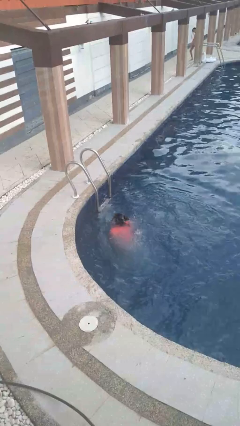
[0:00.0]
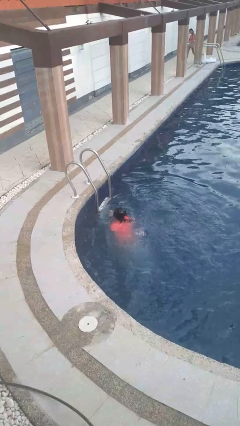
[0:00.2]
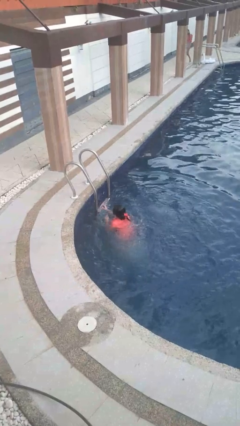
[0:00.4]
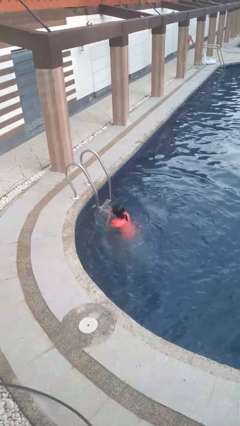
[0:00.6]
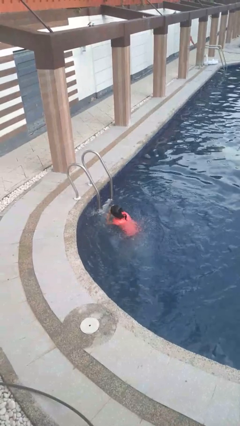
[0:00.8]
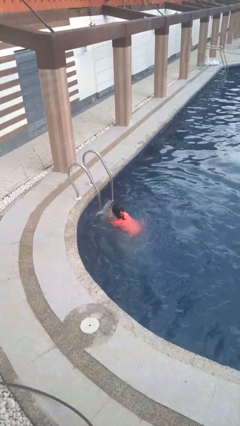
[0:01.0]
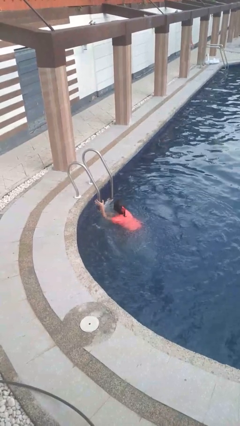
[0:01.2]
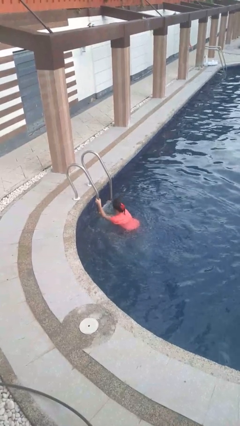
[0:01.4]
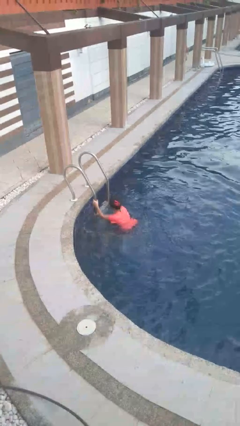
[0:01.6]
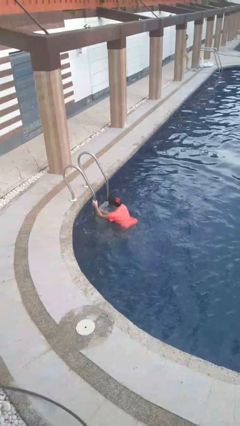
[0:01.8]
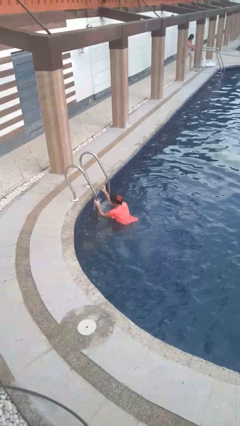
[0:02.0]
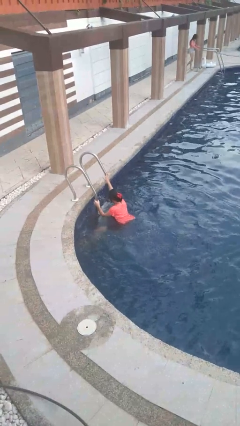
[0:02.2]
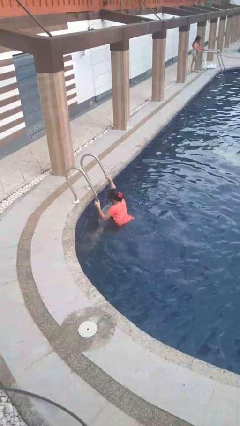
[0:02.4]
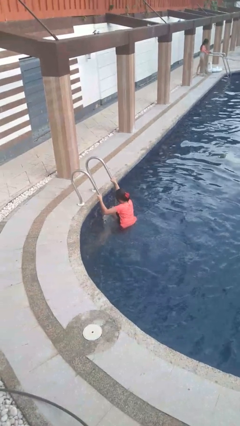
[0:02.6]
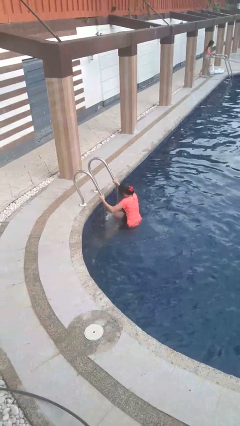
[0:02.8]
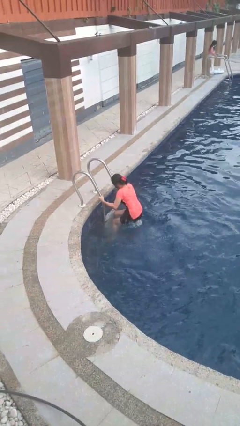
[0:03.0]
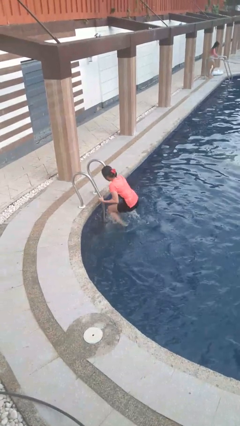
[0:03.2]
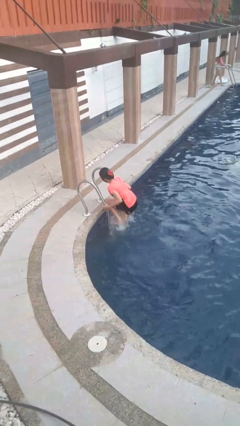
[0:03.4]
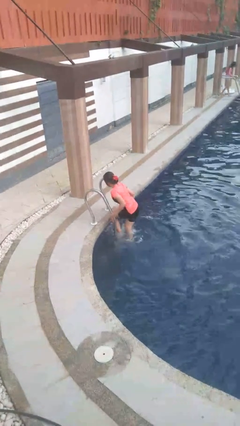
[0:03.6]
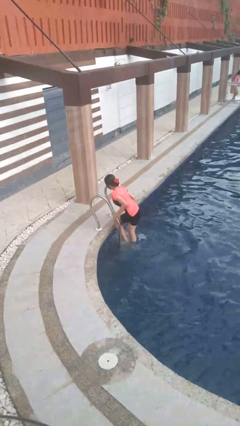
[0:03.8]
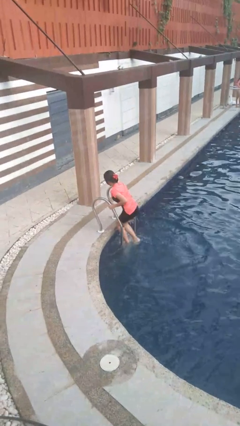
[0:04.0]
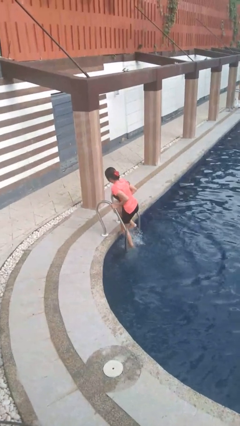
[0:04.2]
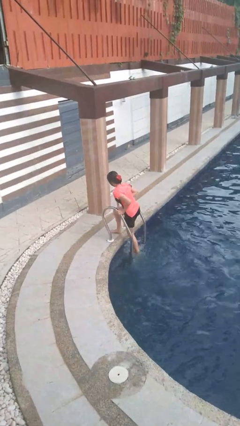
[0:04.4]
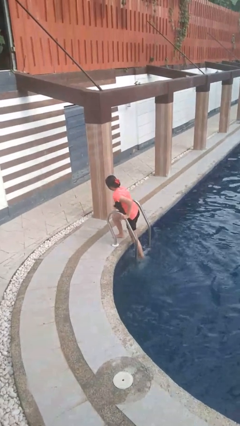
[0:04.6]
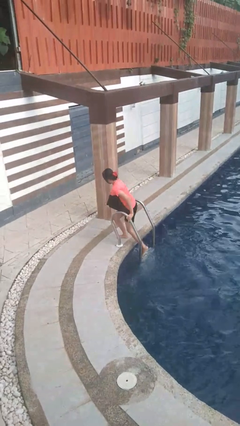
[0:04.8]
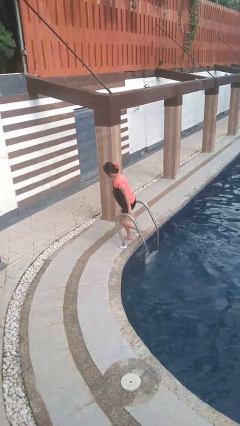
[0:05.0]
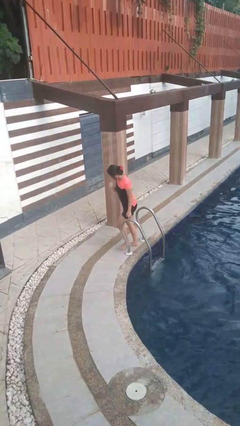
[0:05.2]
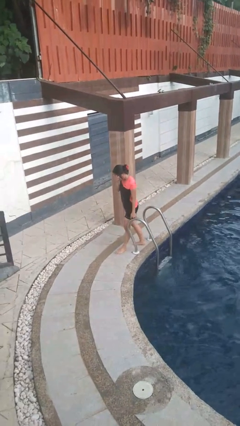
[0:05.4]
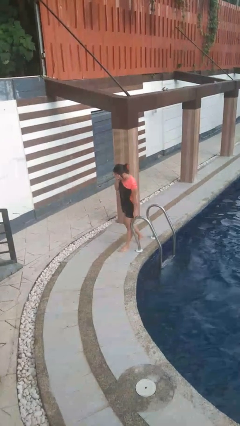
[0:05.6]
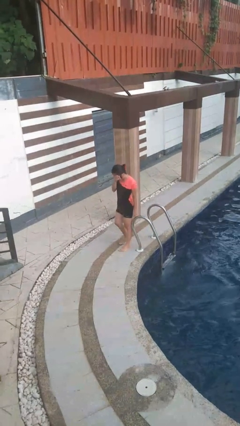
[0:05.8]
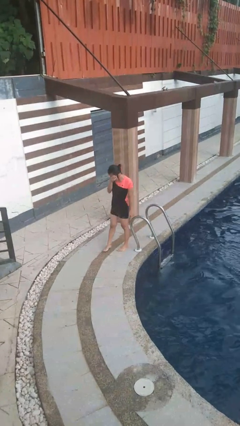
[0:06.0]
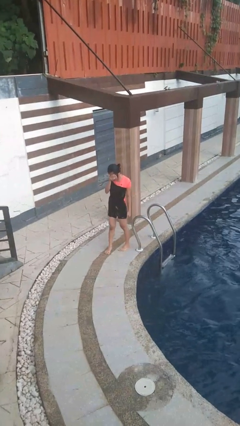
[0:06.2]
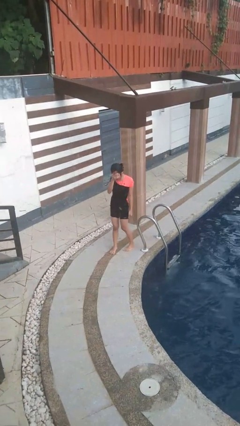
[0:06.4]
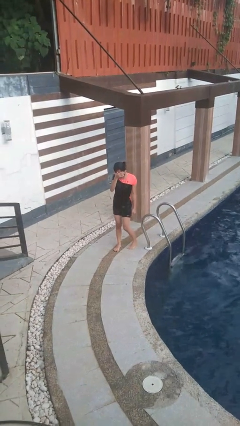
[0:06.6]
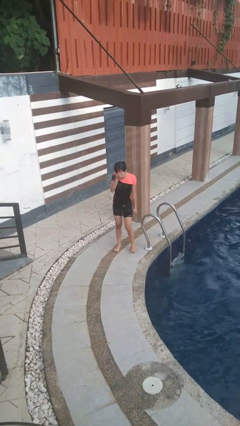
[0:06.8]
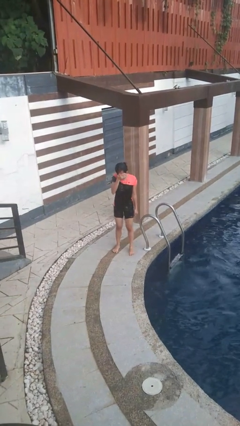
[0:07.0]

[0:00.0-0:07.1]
person exits pool

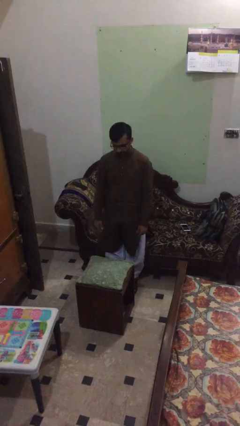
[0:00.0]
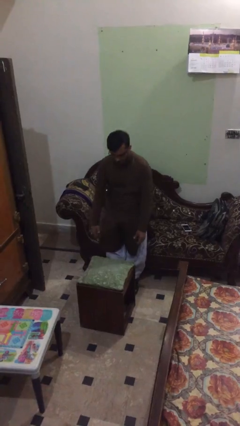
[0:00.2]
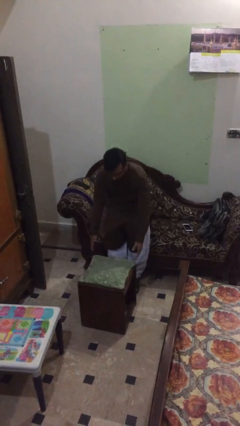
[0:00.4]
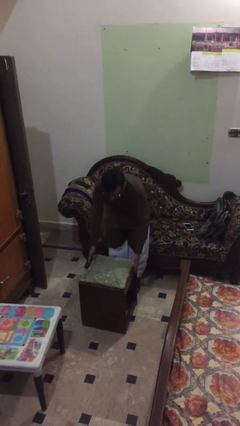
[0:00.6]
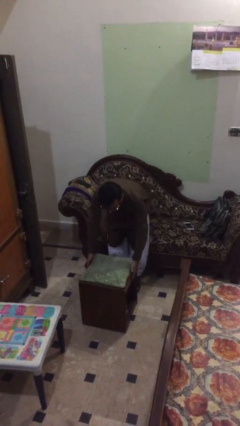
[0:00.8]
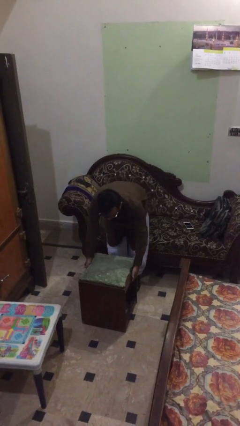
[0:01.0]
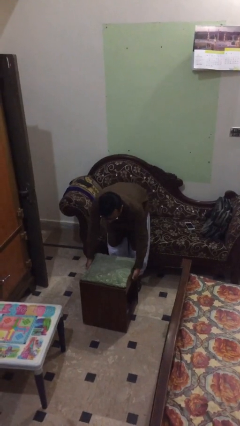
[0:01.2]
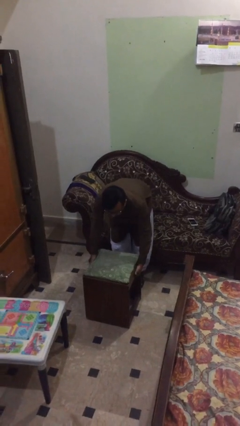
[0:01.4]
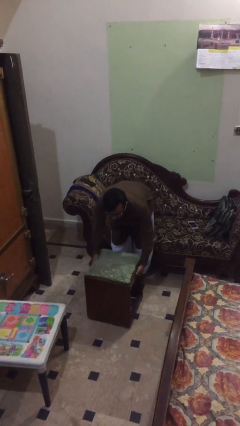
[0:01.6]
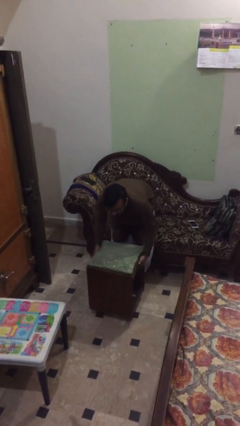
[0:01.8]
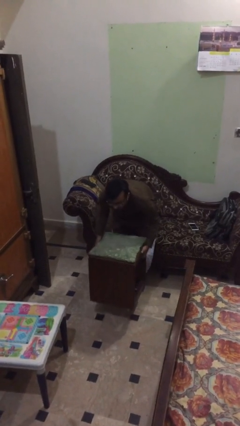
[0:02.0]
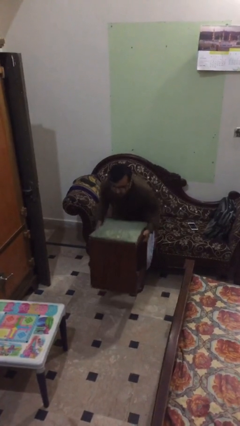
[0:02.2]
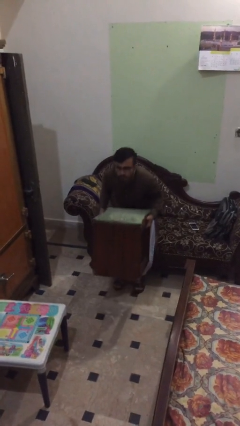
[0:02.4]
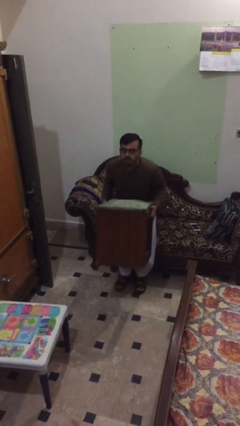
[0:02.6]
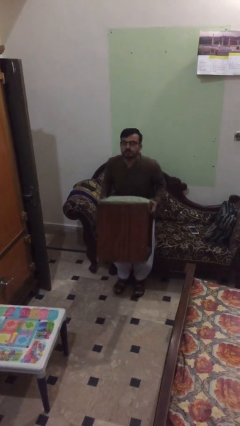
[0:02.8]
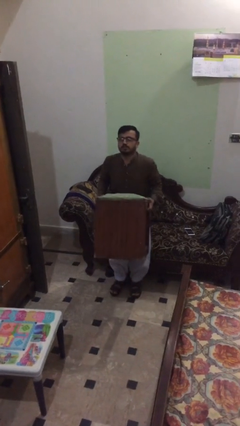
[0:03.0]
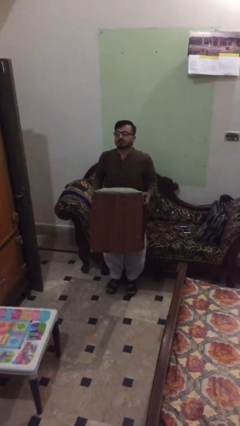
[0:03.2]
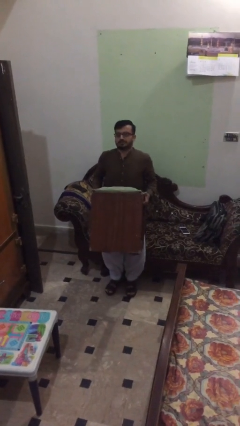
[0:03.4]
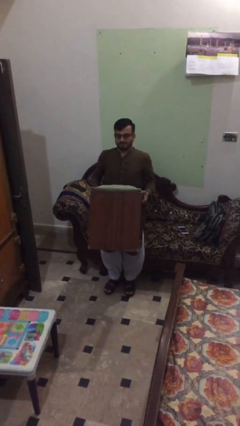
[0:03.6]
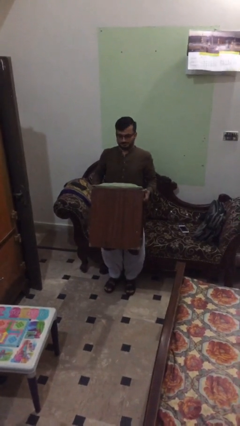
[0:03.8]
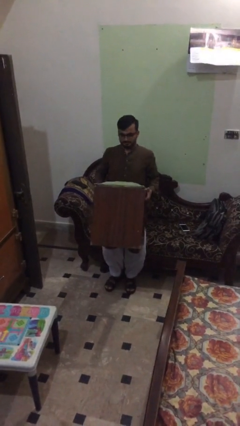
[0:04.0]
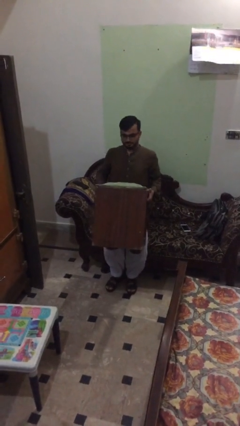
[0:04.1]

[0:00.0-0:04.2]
person picks up object from floor

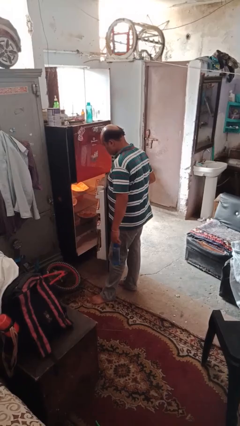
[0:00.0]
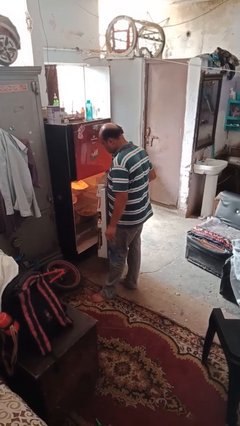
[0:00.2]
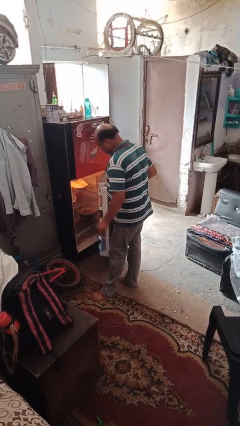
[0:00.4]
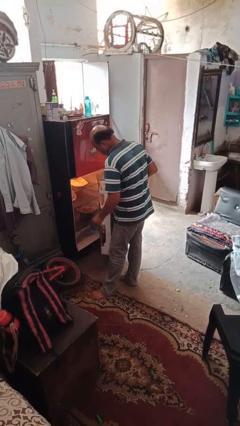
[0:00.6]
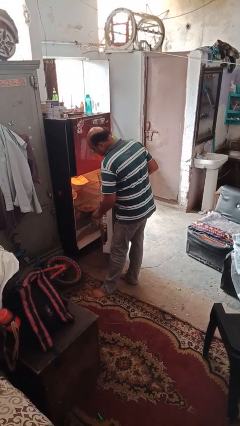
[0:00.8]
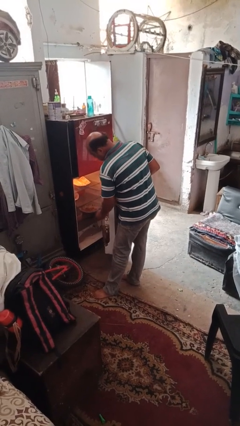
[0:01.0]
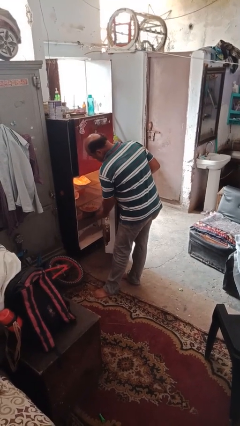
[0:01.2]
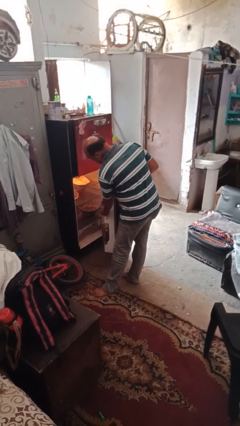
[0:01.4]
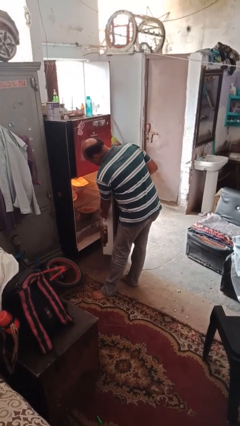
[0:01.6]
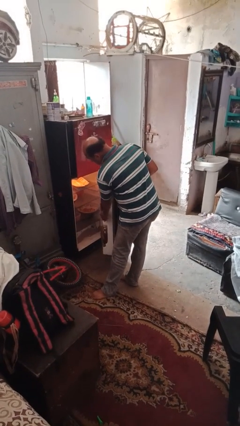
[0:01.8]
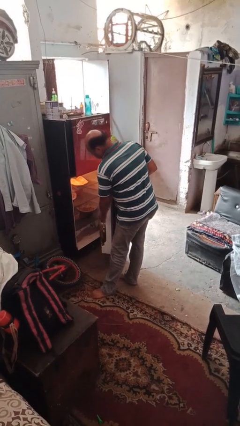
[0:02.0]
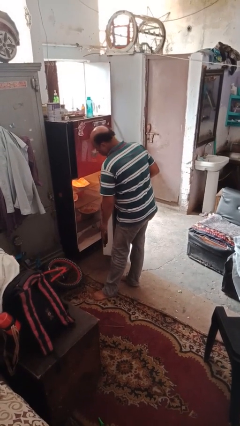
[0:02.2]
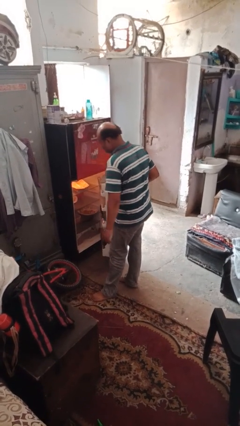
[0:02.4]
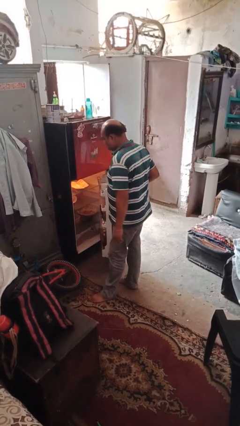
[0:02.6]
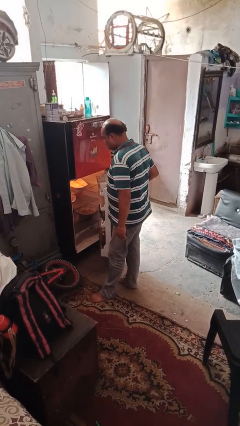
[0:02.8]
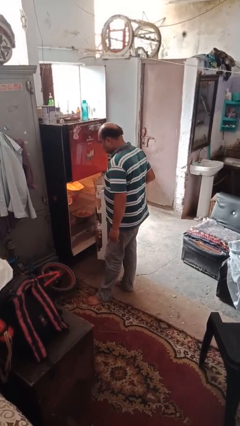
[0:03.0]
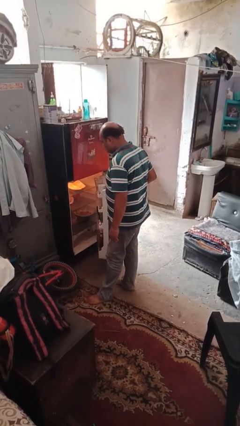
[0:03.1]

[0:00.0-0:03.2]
person puts object into refrigerator

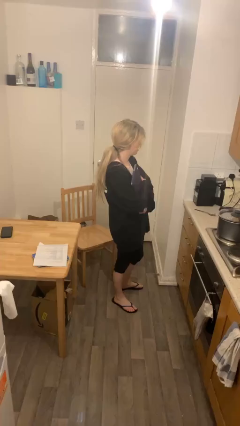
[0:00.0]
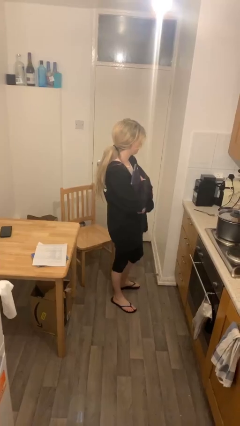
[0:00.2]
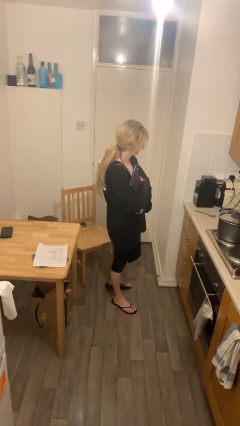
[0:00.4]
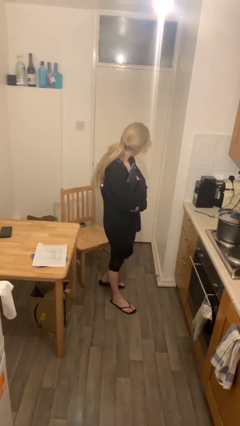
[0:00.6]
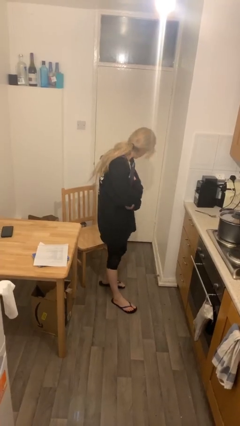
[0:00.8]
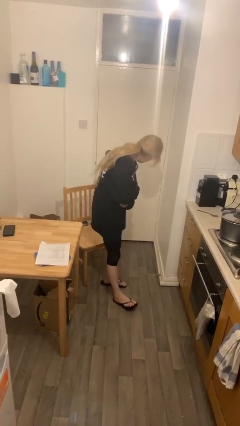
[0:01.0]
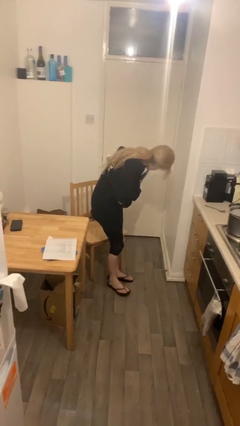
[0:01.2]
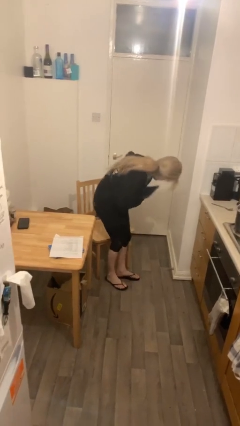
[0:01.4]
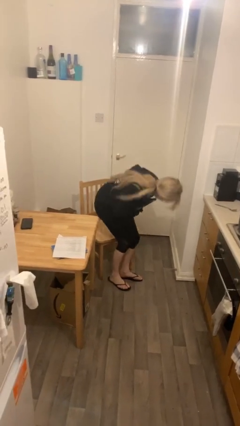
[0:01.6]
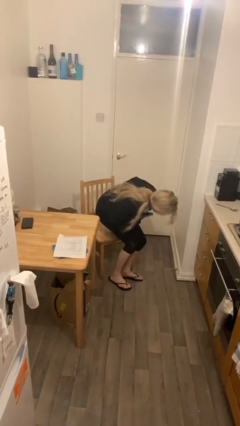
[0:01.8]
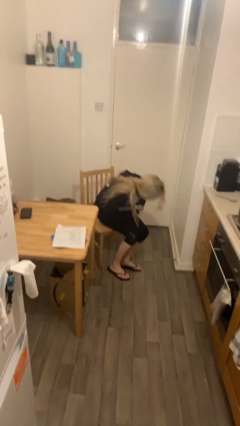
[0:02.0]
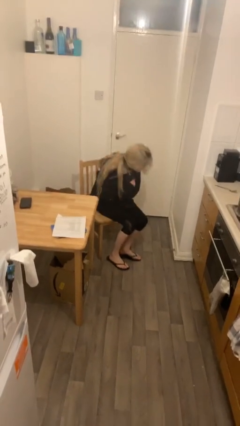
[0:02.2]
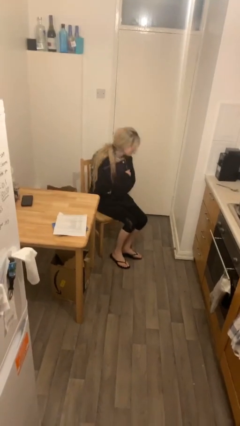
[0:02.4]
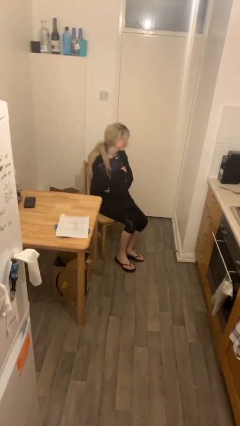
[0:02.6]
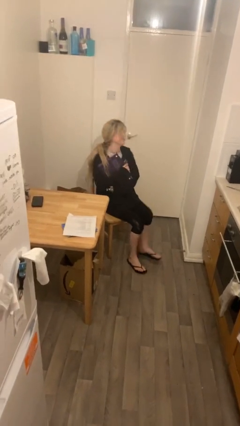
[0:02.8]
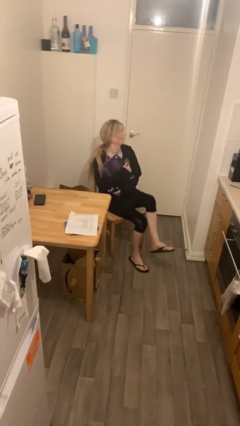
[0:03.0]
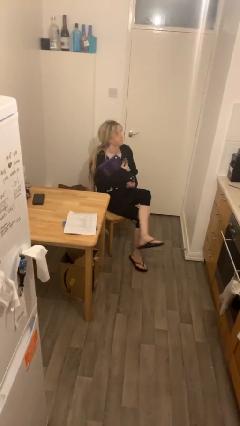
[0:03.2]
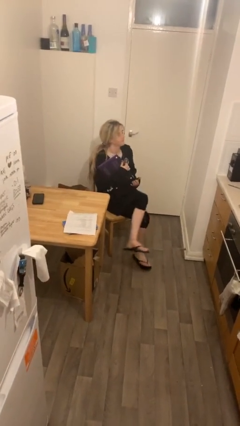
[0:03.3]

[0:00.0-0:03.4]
person sits down
